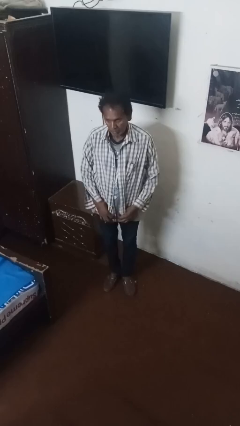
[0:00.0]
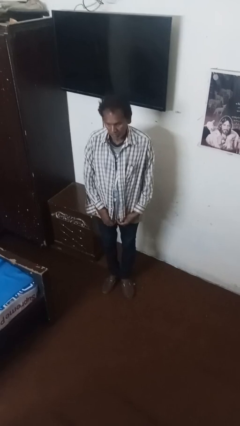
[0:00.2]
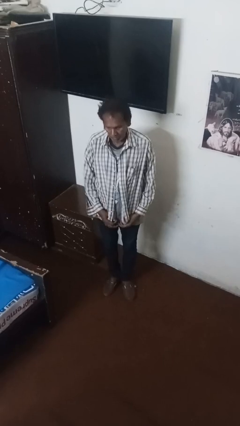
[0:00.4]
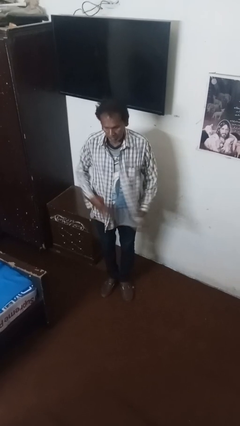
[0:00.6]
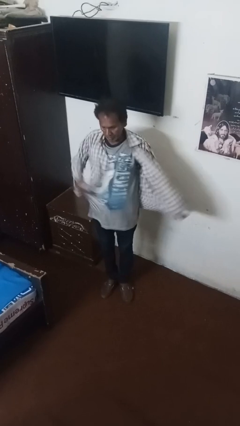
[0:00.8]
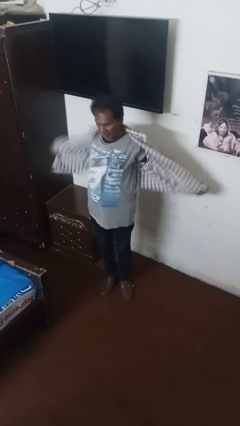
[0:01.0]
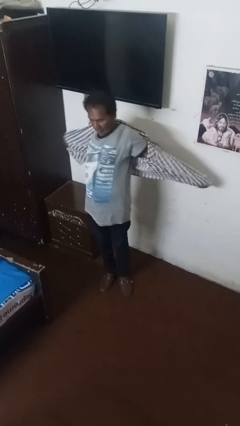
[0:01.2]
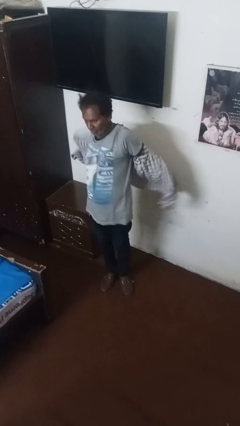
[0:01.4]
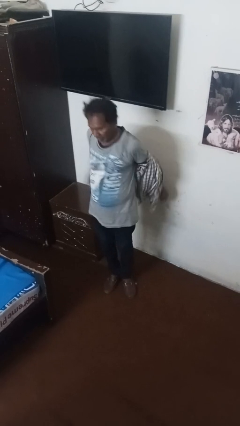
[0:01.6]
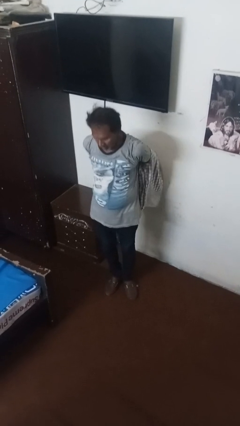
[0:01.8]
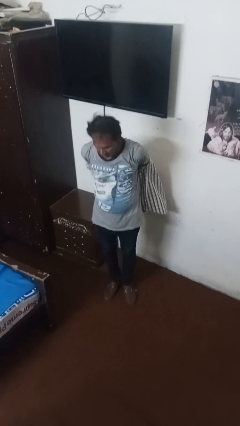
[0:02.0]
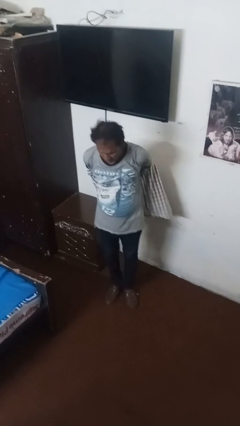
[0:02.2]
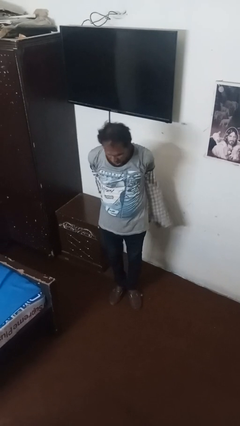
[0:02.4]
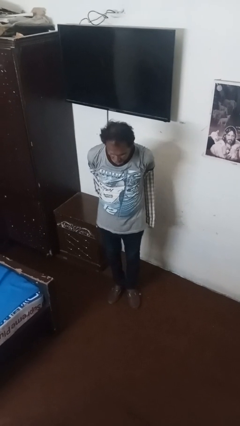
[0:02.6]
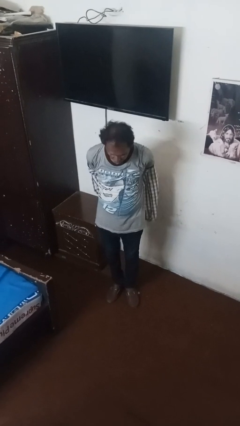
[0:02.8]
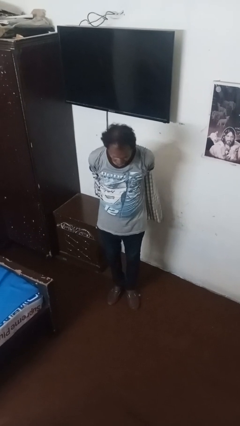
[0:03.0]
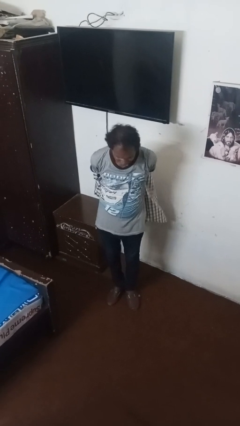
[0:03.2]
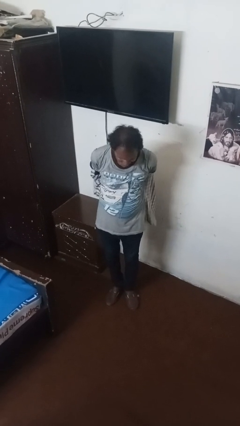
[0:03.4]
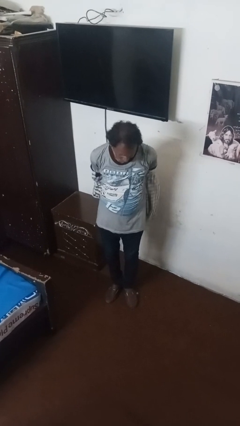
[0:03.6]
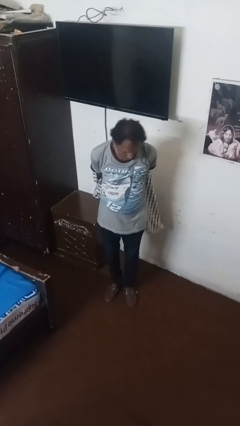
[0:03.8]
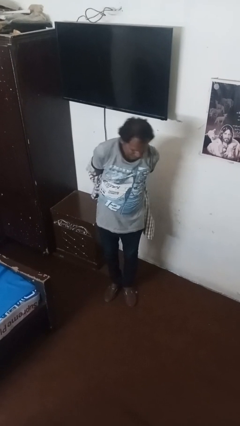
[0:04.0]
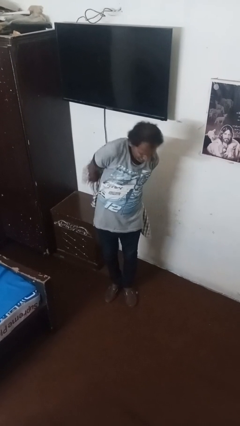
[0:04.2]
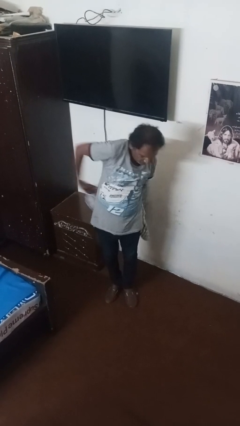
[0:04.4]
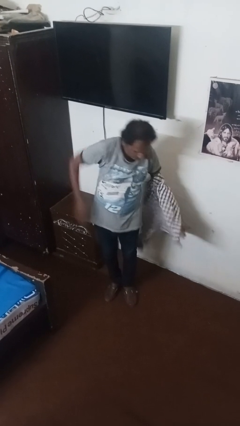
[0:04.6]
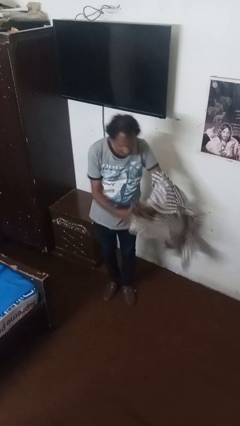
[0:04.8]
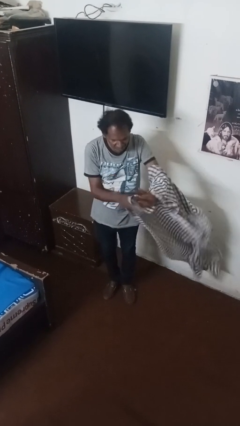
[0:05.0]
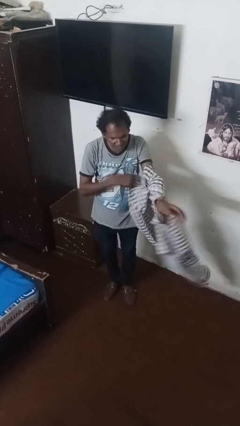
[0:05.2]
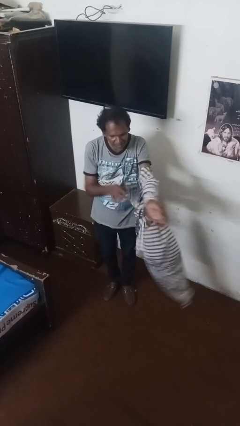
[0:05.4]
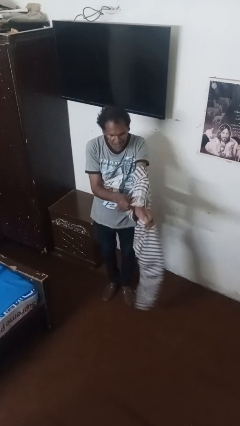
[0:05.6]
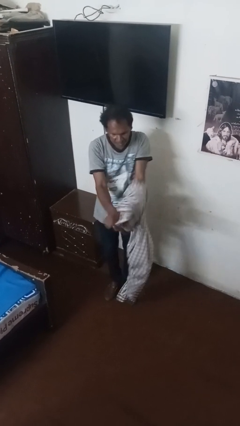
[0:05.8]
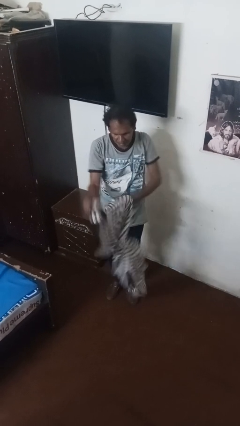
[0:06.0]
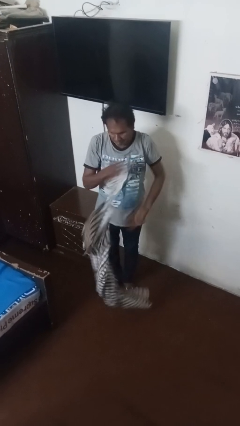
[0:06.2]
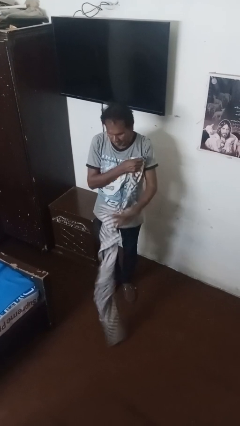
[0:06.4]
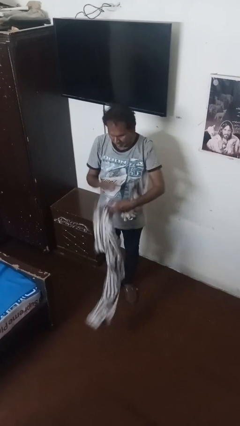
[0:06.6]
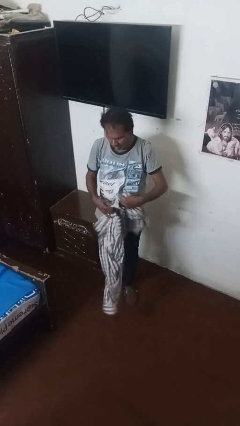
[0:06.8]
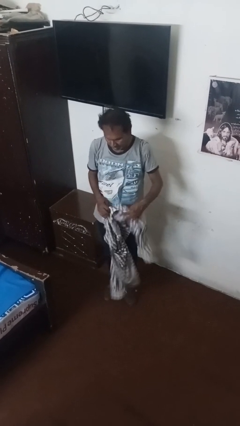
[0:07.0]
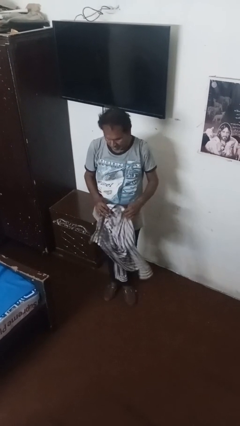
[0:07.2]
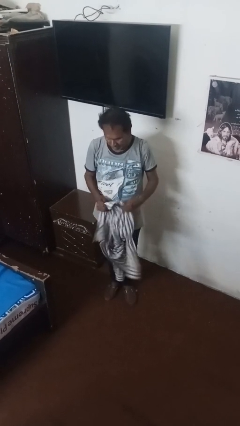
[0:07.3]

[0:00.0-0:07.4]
person takes off shirt

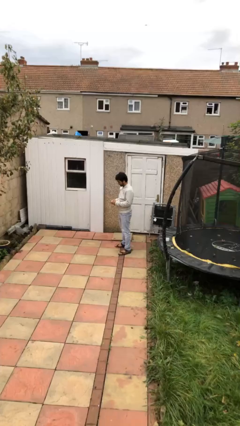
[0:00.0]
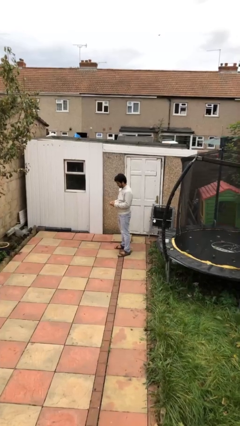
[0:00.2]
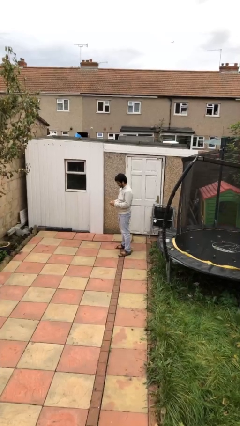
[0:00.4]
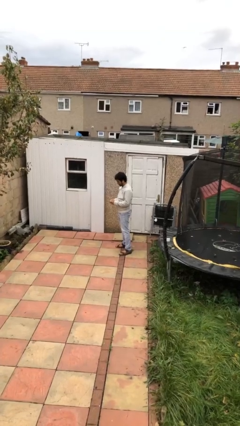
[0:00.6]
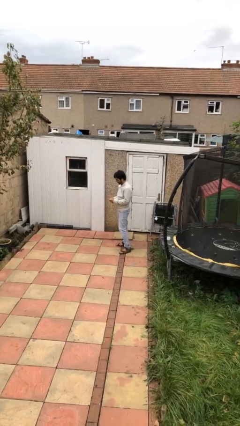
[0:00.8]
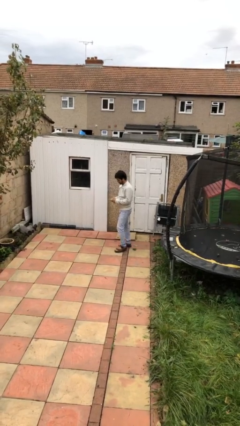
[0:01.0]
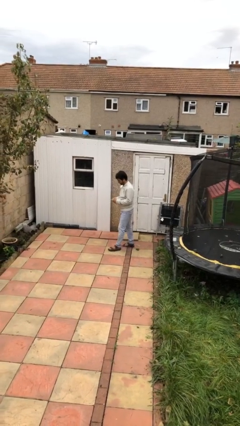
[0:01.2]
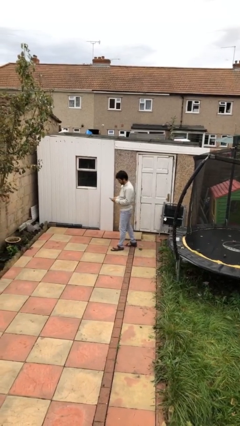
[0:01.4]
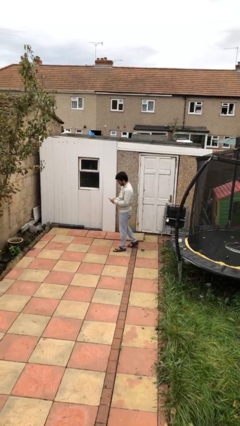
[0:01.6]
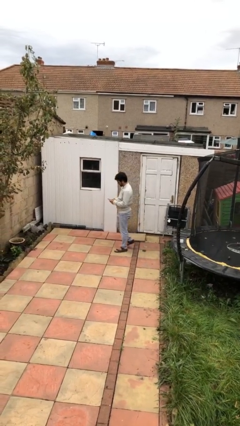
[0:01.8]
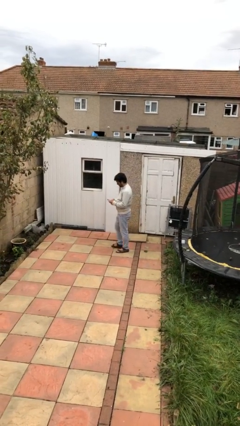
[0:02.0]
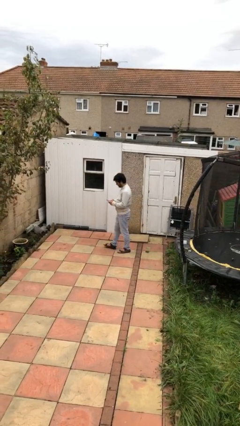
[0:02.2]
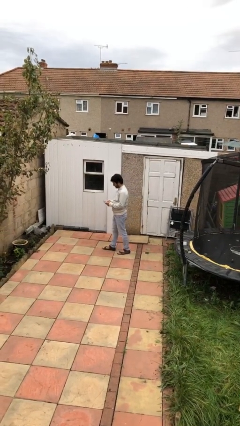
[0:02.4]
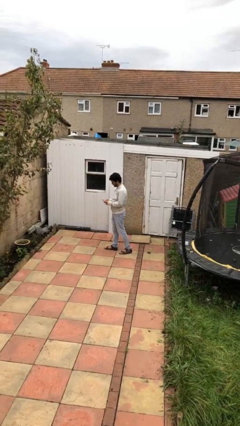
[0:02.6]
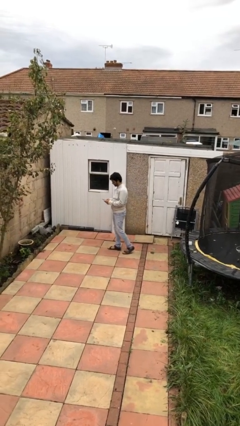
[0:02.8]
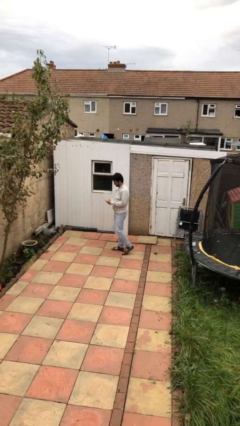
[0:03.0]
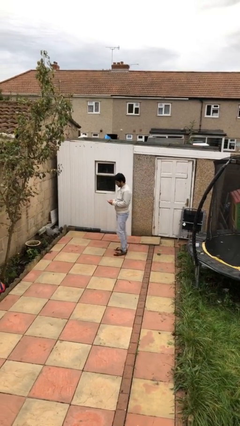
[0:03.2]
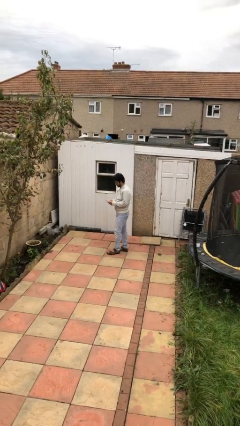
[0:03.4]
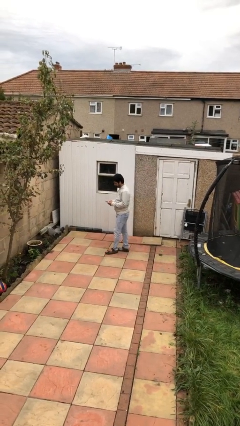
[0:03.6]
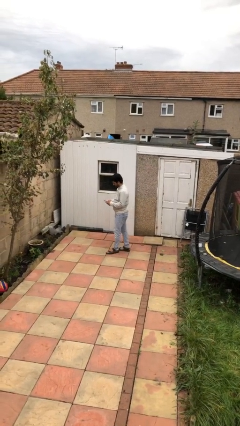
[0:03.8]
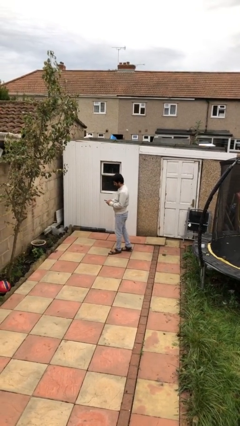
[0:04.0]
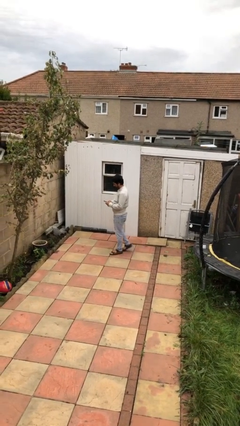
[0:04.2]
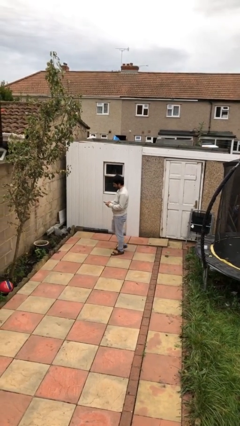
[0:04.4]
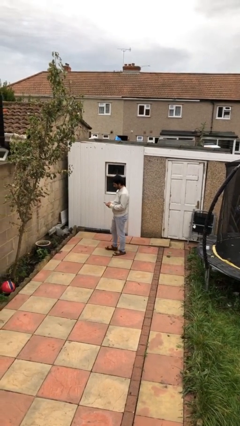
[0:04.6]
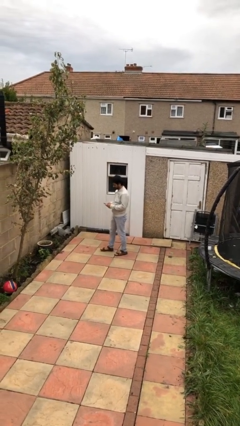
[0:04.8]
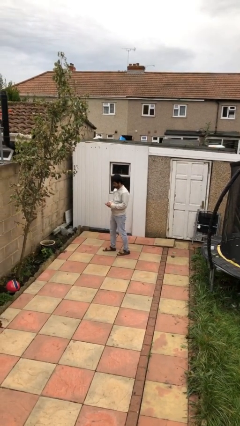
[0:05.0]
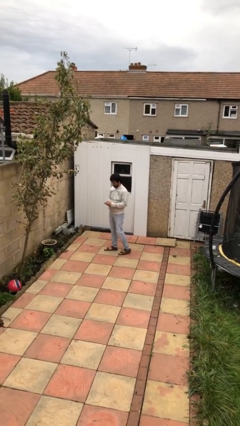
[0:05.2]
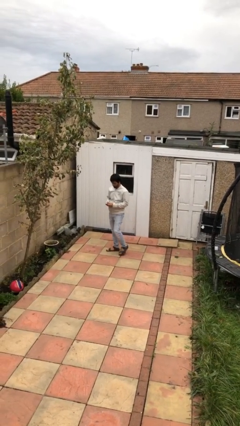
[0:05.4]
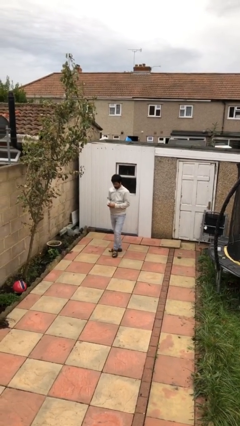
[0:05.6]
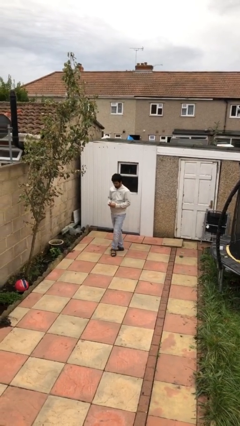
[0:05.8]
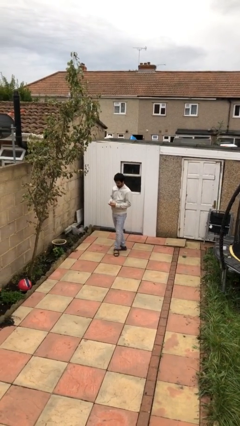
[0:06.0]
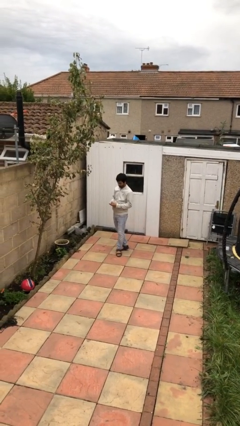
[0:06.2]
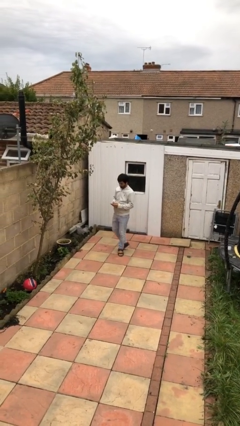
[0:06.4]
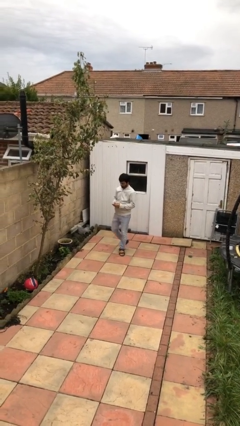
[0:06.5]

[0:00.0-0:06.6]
person texts on phone

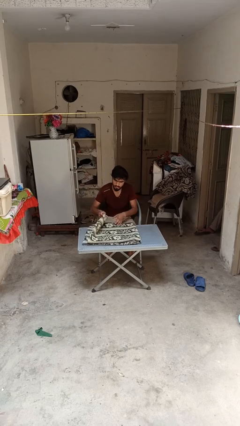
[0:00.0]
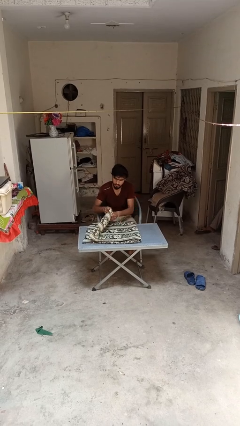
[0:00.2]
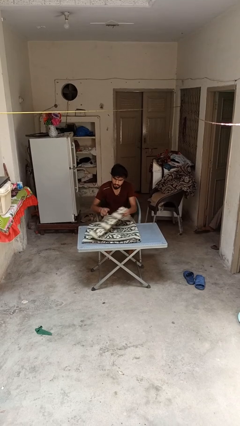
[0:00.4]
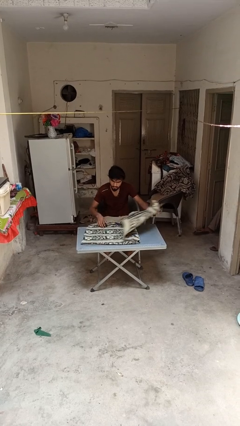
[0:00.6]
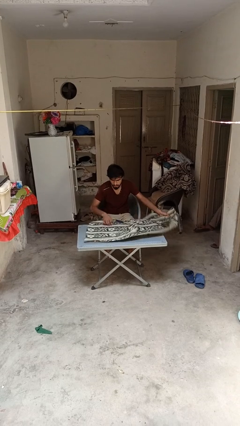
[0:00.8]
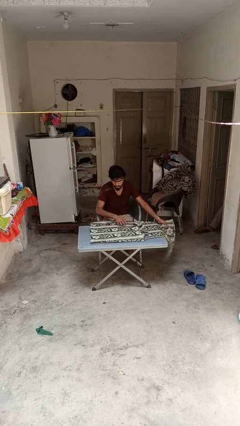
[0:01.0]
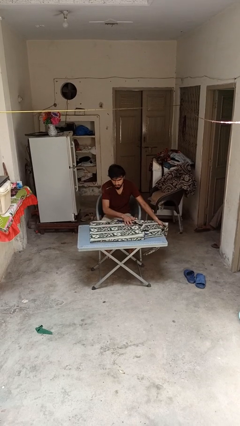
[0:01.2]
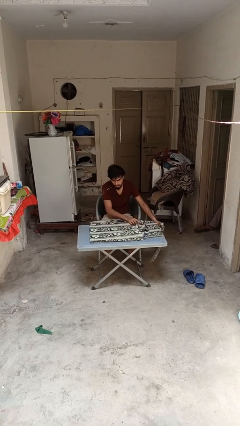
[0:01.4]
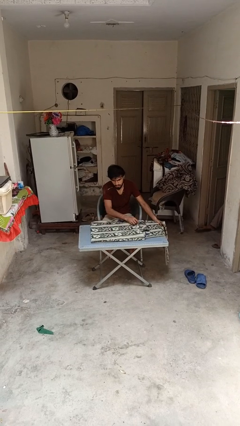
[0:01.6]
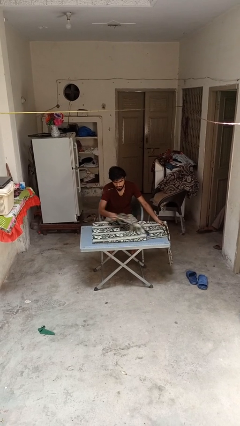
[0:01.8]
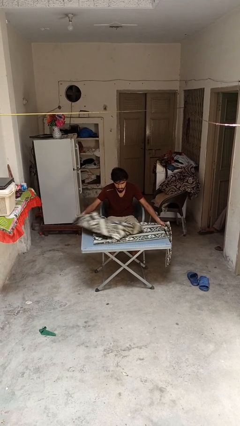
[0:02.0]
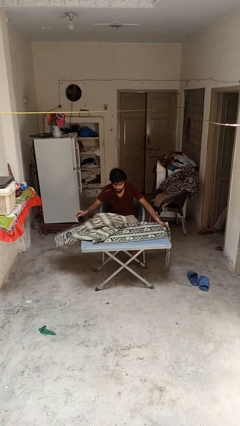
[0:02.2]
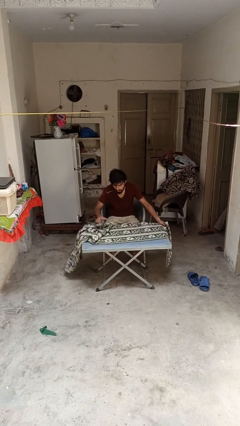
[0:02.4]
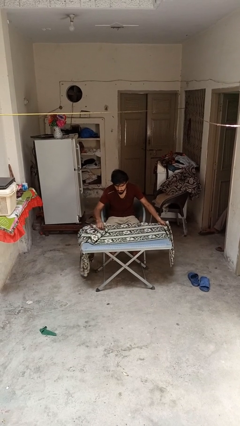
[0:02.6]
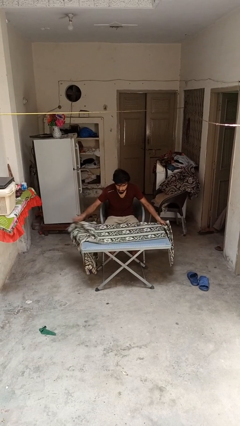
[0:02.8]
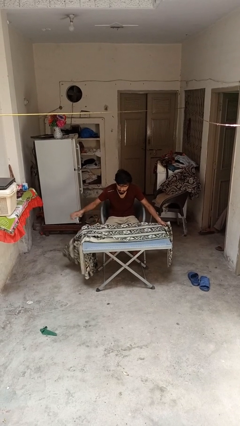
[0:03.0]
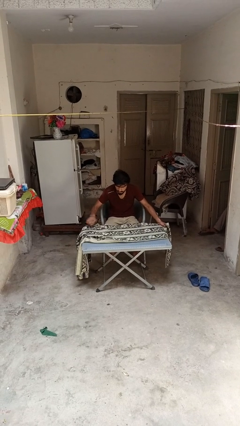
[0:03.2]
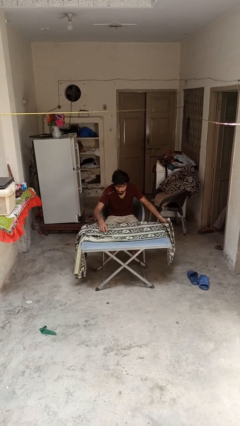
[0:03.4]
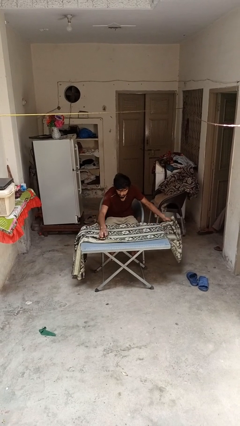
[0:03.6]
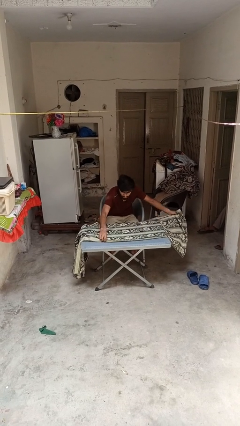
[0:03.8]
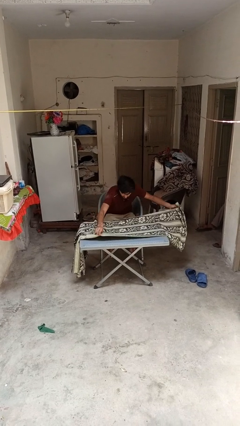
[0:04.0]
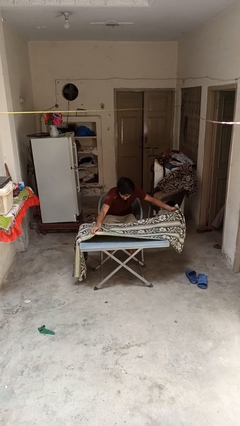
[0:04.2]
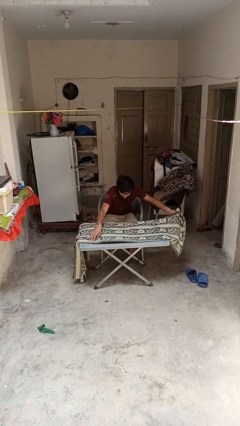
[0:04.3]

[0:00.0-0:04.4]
person spreads tablecloth
